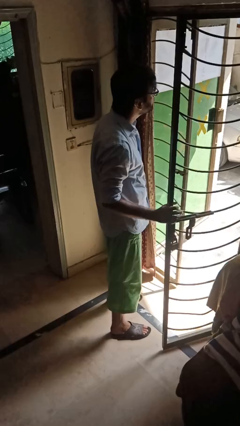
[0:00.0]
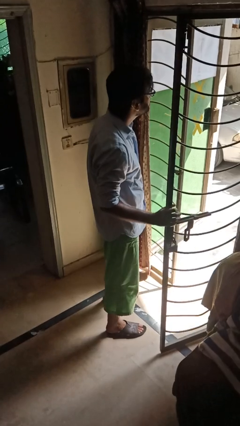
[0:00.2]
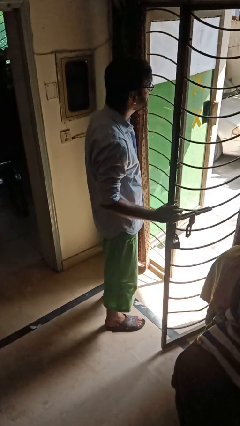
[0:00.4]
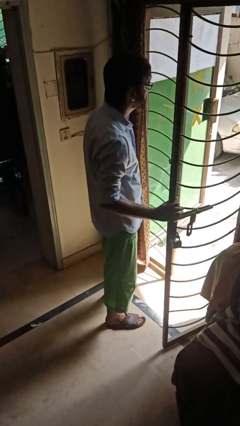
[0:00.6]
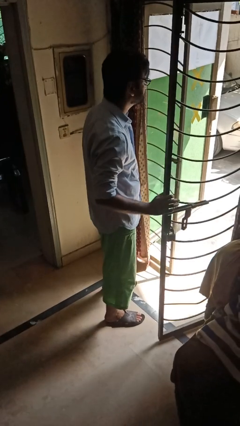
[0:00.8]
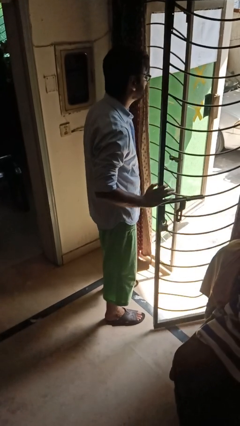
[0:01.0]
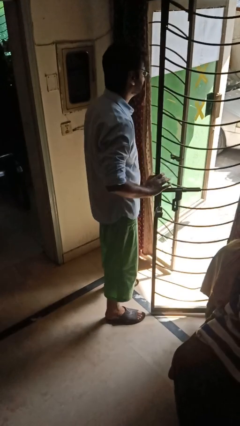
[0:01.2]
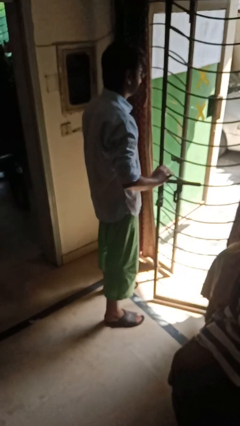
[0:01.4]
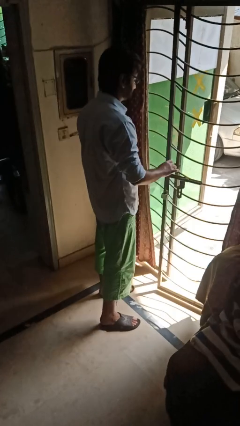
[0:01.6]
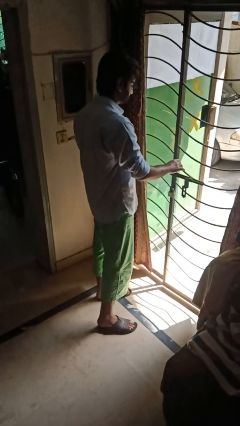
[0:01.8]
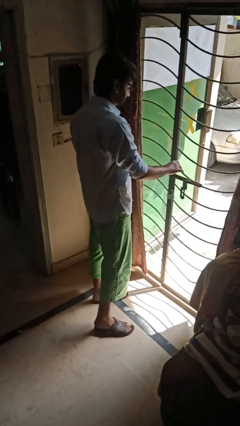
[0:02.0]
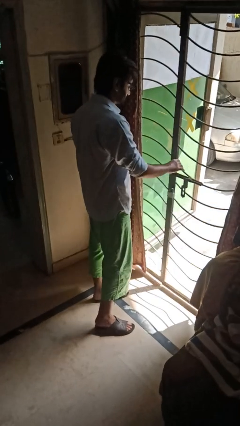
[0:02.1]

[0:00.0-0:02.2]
person closes gate

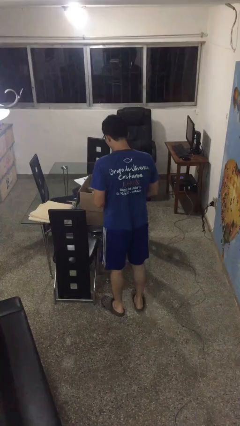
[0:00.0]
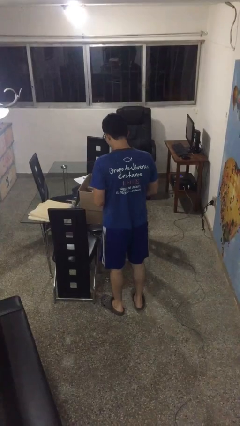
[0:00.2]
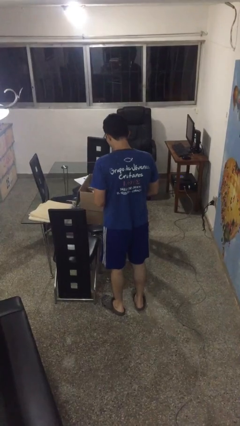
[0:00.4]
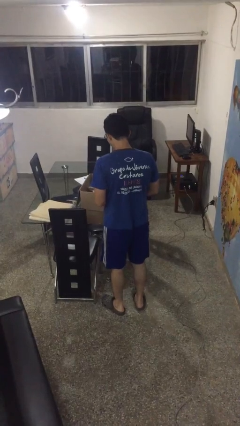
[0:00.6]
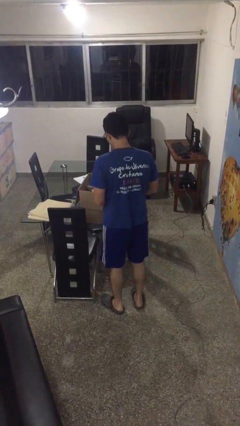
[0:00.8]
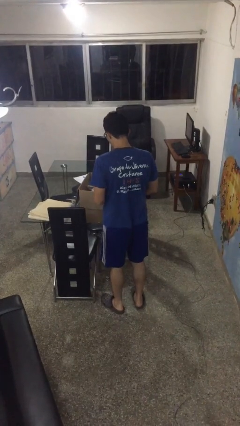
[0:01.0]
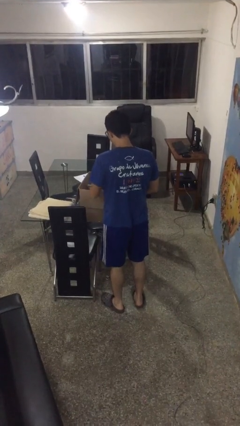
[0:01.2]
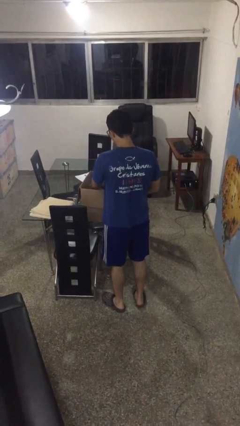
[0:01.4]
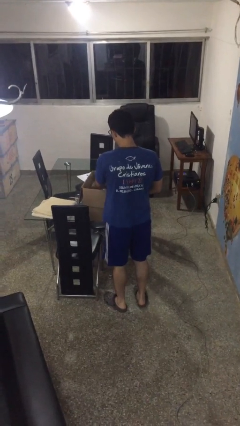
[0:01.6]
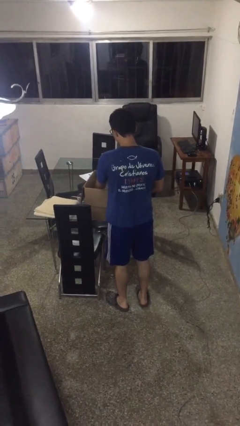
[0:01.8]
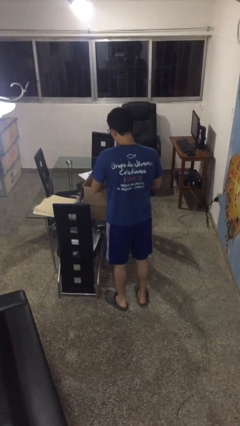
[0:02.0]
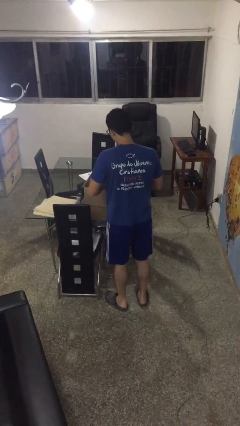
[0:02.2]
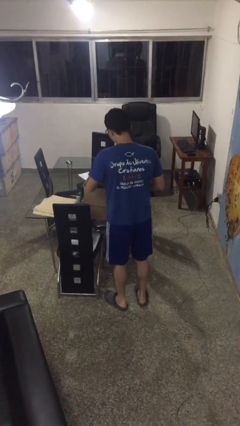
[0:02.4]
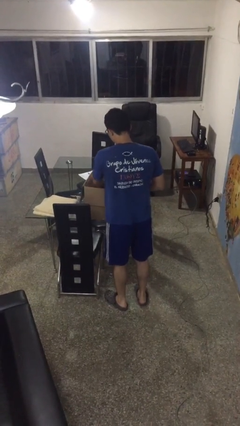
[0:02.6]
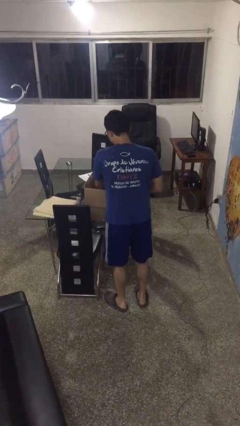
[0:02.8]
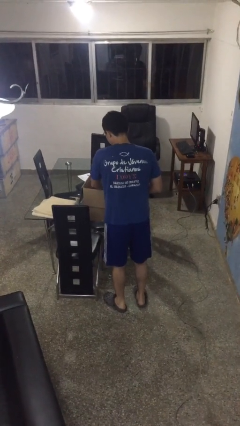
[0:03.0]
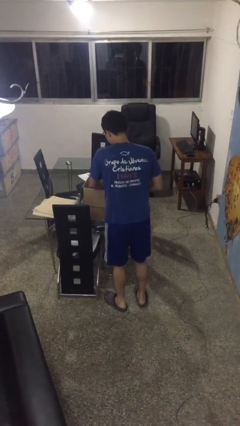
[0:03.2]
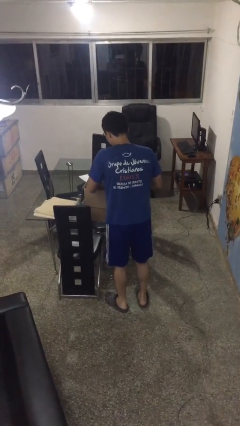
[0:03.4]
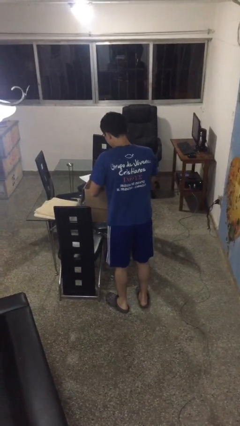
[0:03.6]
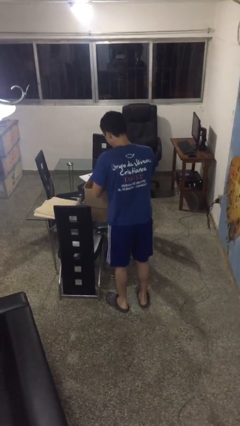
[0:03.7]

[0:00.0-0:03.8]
person searches in box

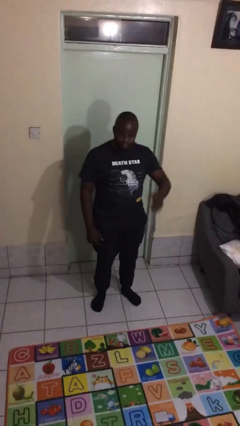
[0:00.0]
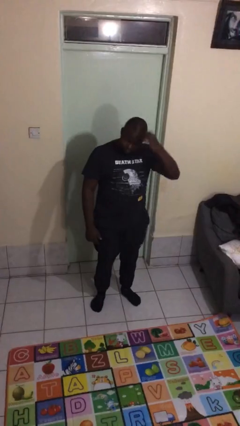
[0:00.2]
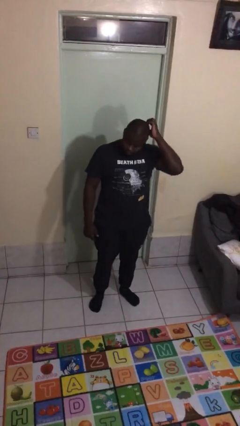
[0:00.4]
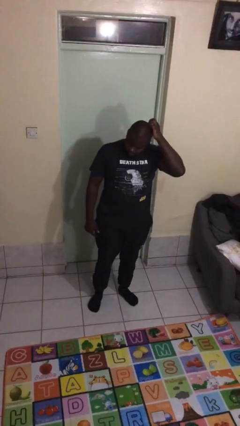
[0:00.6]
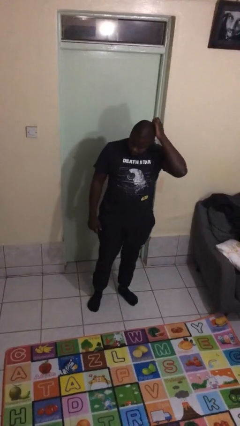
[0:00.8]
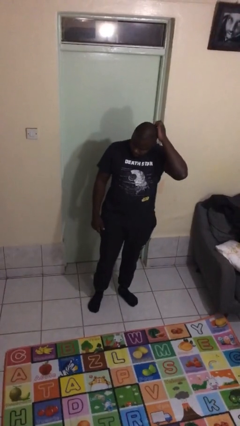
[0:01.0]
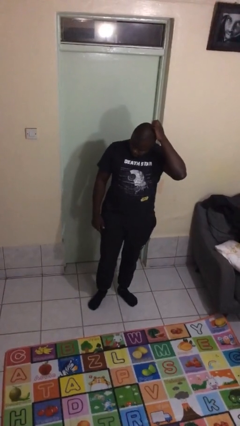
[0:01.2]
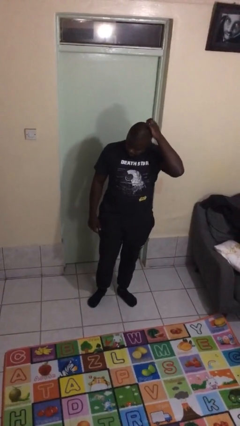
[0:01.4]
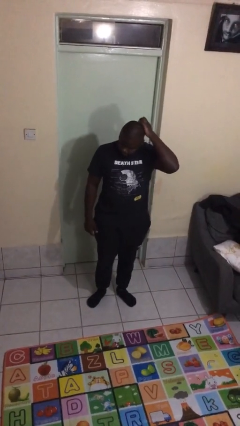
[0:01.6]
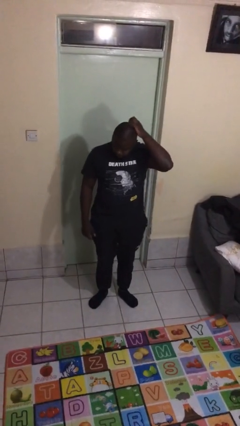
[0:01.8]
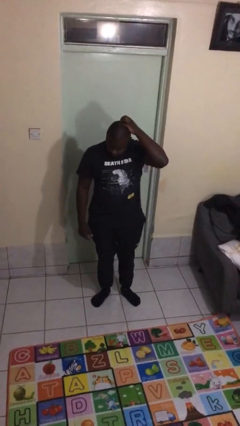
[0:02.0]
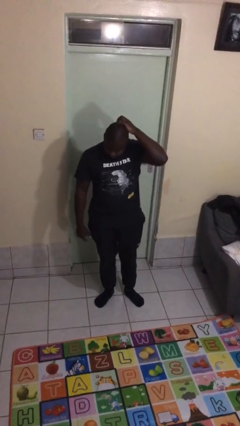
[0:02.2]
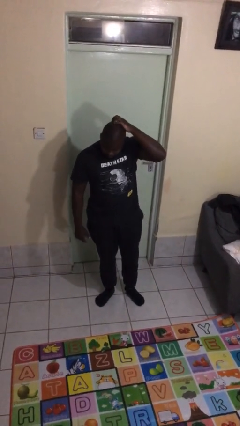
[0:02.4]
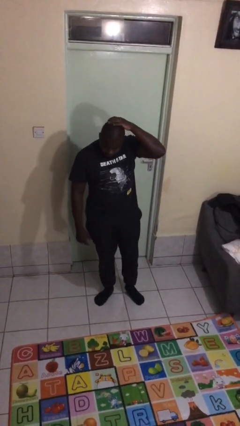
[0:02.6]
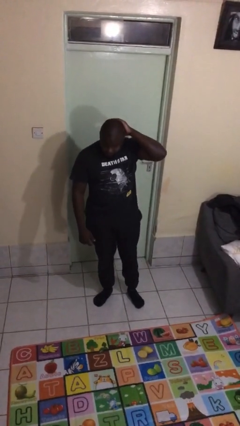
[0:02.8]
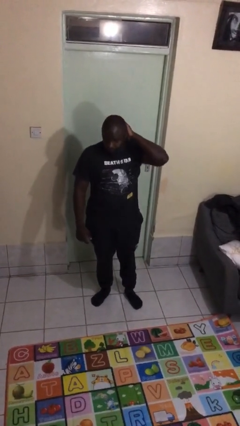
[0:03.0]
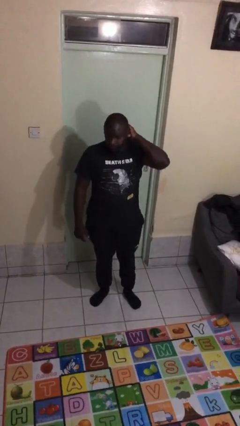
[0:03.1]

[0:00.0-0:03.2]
person scratches face

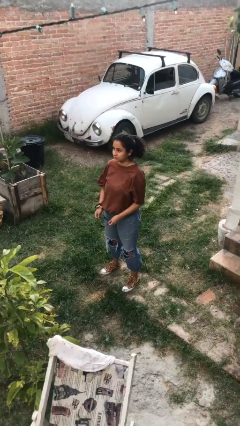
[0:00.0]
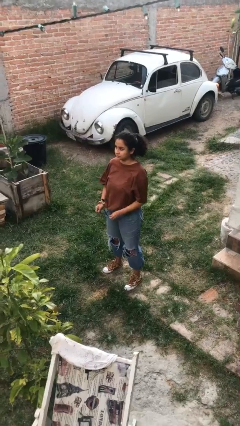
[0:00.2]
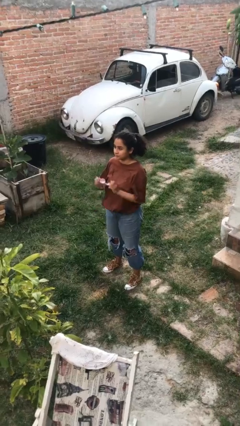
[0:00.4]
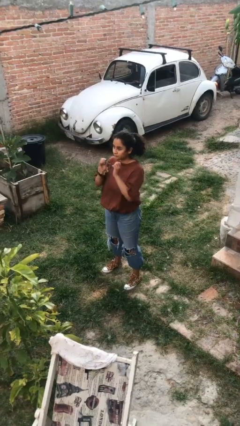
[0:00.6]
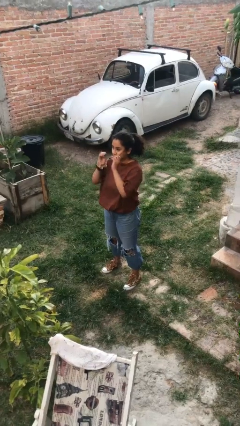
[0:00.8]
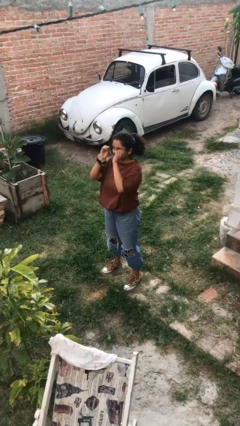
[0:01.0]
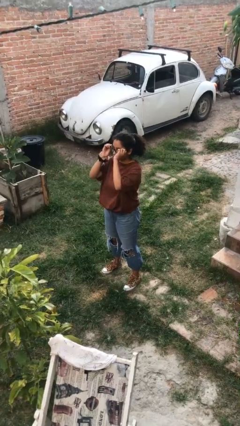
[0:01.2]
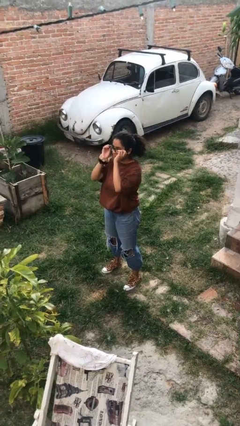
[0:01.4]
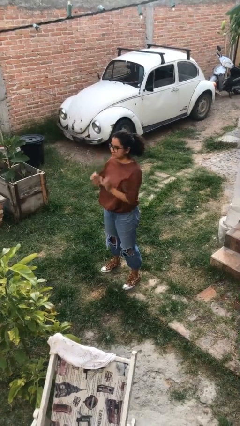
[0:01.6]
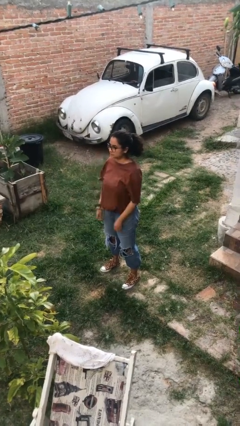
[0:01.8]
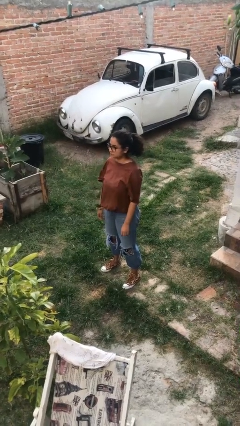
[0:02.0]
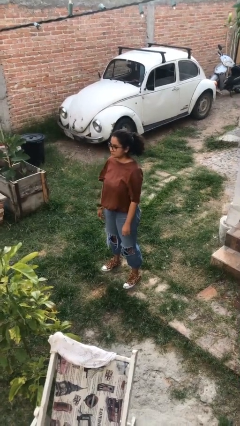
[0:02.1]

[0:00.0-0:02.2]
person puts on glasses

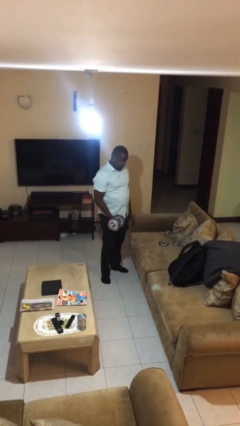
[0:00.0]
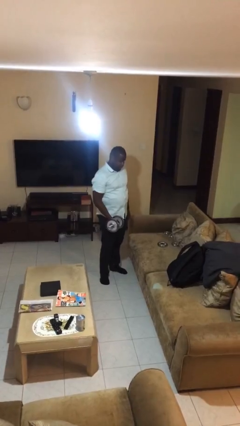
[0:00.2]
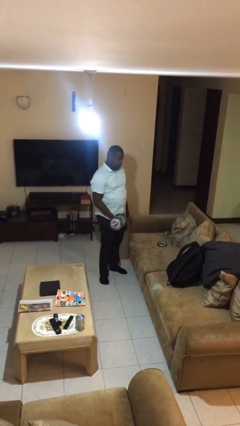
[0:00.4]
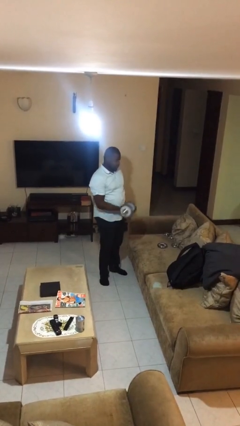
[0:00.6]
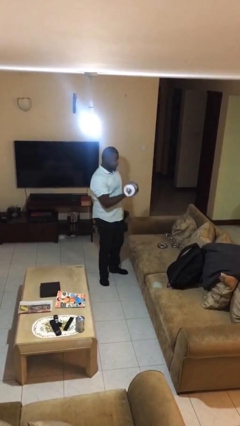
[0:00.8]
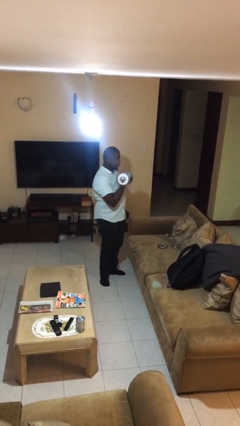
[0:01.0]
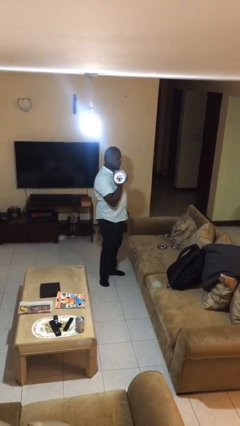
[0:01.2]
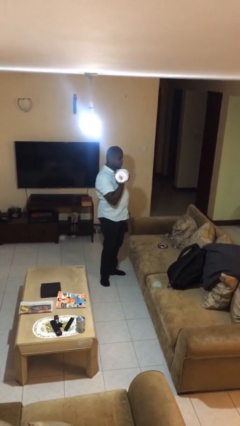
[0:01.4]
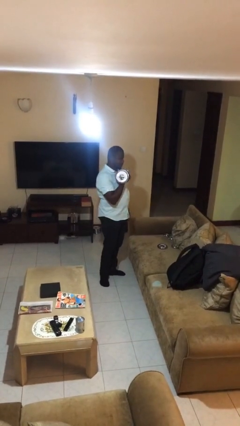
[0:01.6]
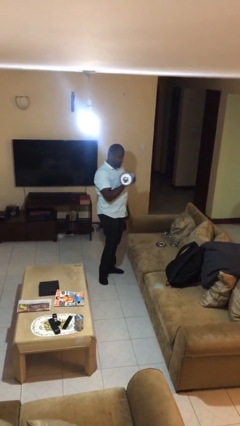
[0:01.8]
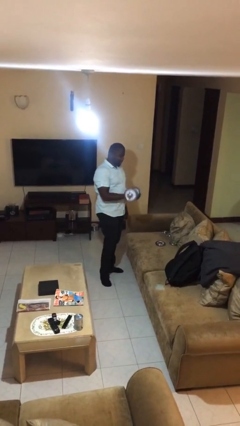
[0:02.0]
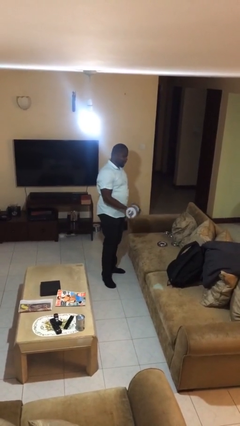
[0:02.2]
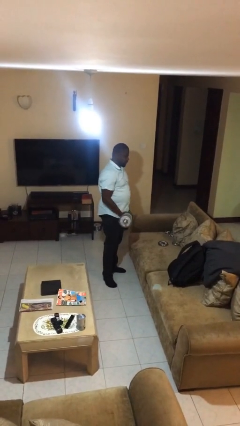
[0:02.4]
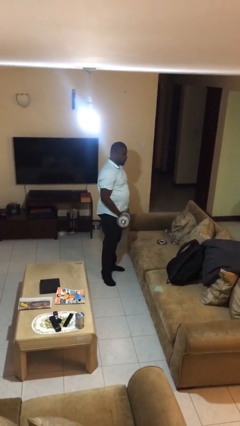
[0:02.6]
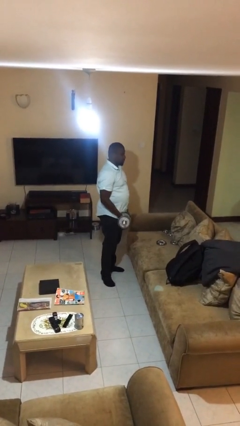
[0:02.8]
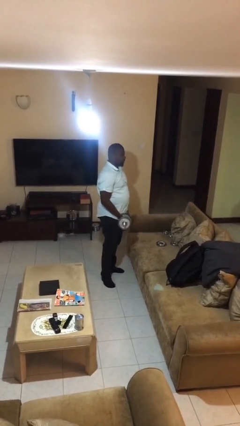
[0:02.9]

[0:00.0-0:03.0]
person lifts dumbbells

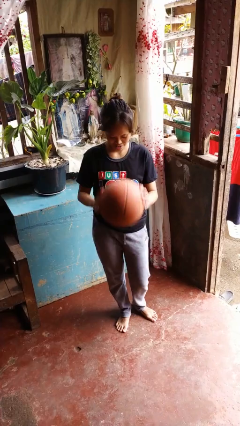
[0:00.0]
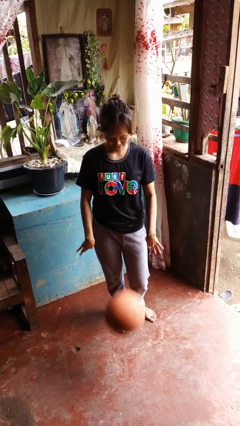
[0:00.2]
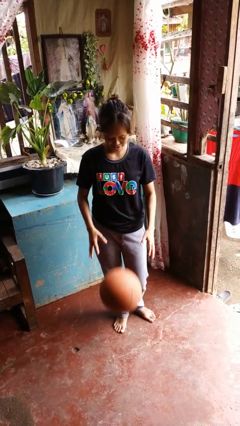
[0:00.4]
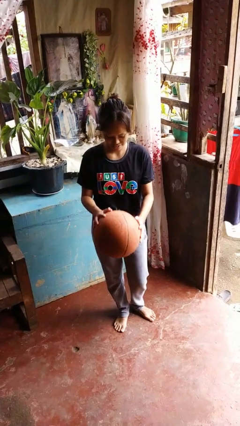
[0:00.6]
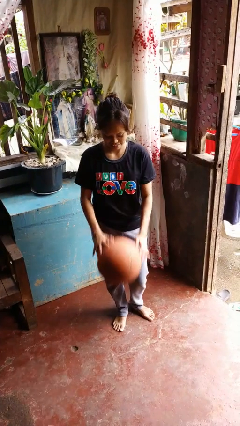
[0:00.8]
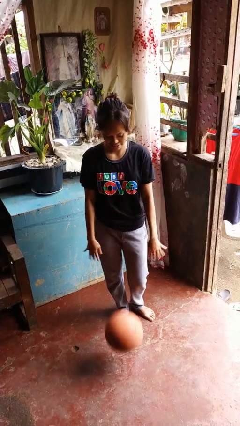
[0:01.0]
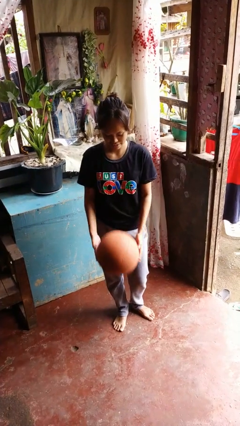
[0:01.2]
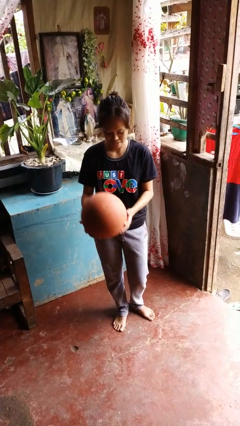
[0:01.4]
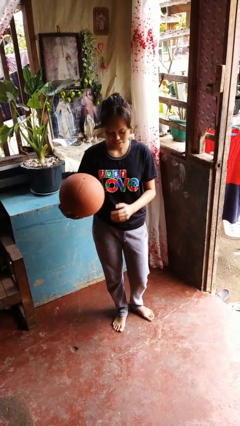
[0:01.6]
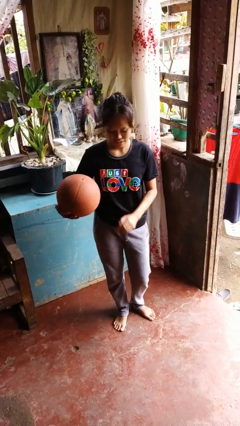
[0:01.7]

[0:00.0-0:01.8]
person bounces ball on floor

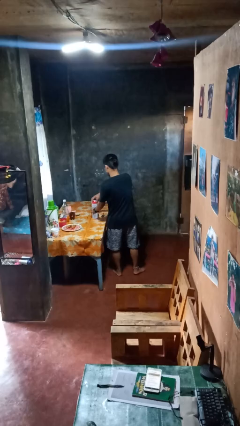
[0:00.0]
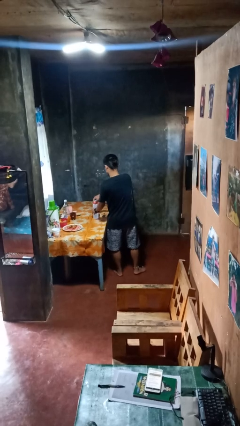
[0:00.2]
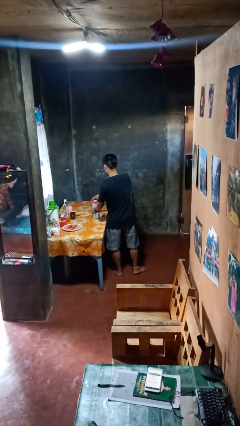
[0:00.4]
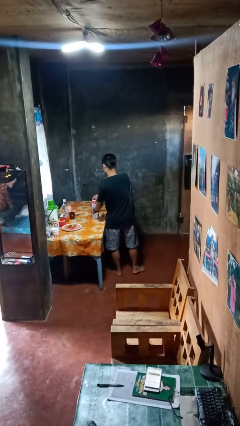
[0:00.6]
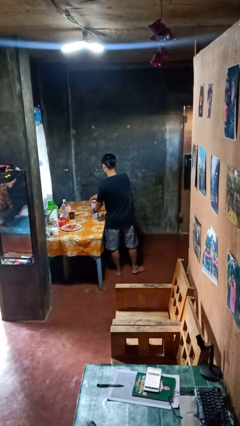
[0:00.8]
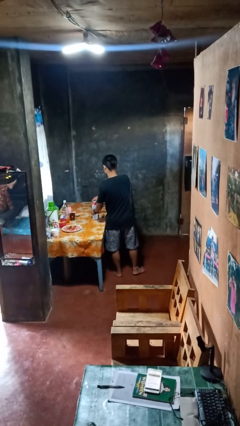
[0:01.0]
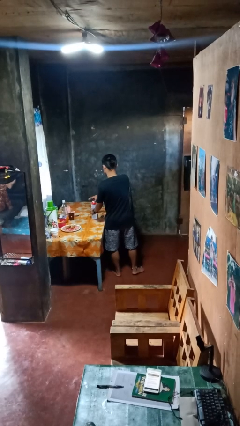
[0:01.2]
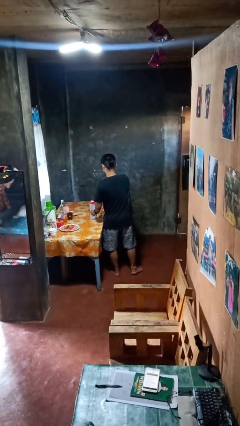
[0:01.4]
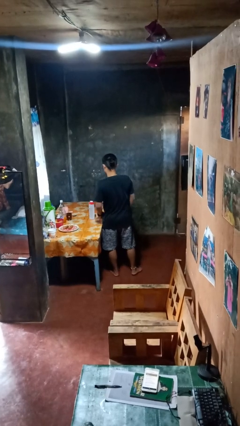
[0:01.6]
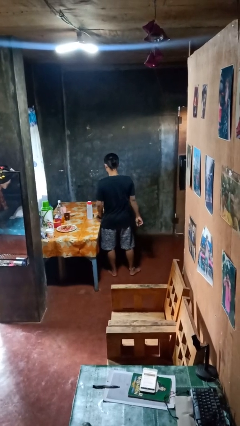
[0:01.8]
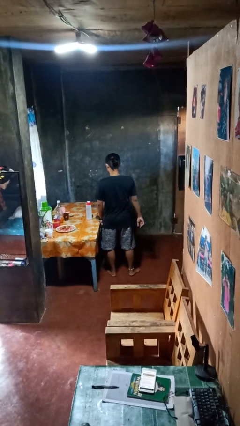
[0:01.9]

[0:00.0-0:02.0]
person closes jar
